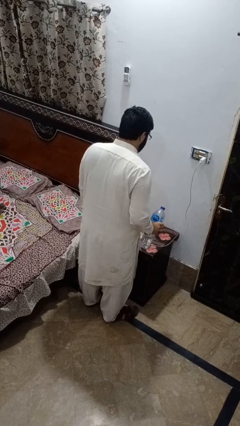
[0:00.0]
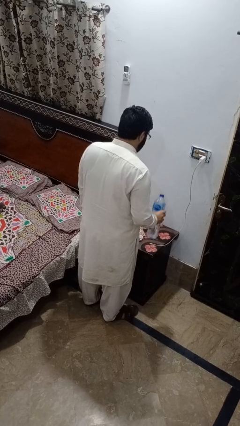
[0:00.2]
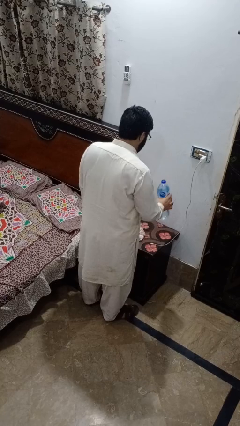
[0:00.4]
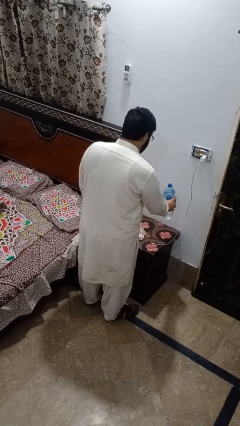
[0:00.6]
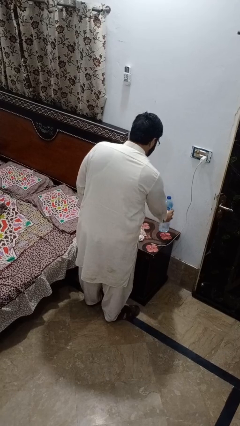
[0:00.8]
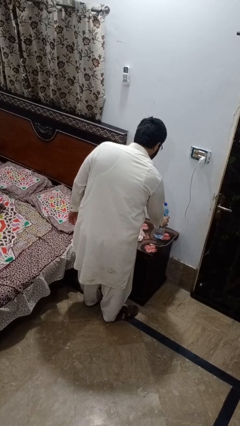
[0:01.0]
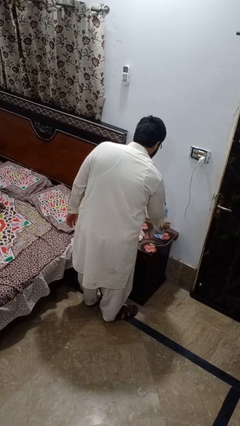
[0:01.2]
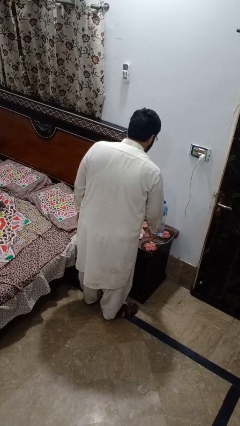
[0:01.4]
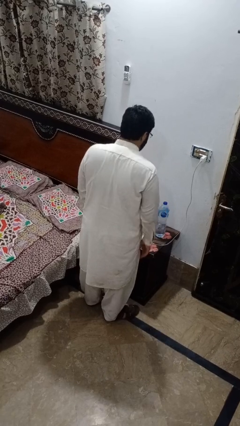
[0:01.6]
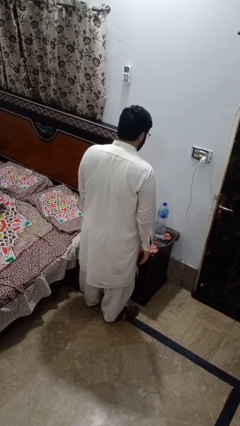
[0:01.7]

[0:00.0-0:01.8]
person puts down object on countertop

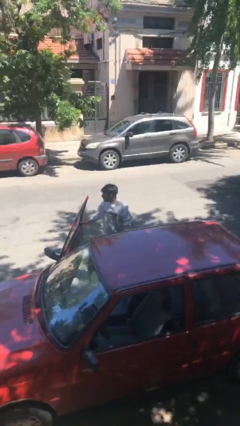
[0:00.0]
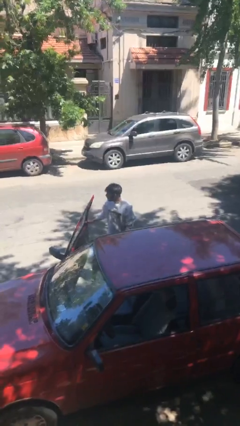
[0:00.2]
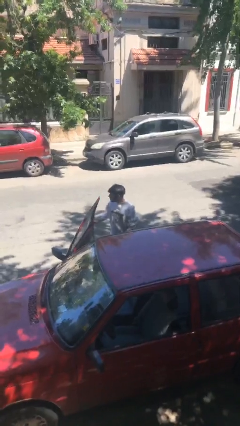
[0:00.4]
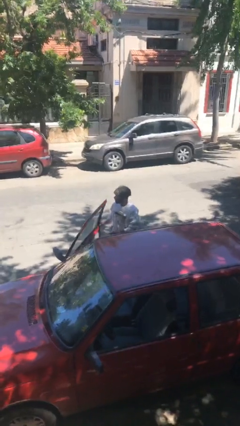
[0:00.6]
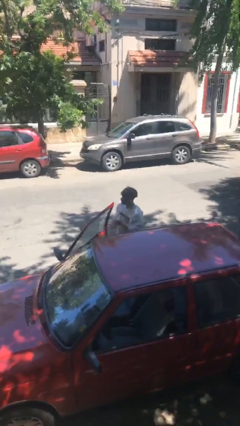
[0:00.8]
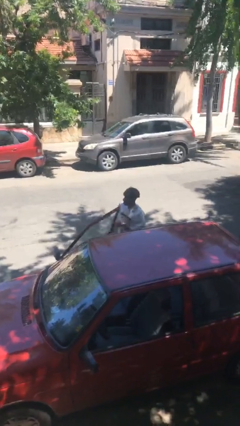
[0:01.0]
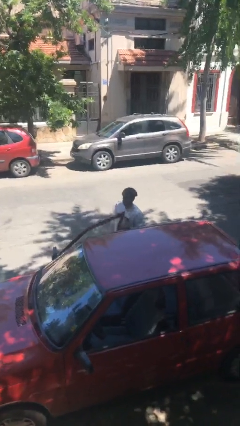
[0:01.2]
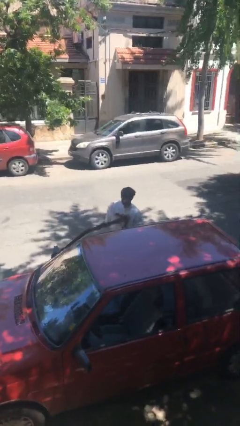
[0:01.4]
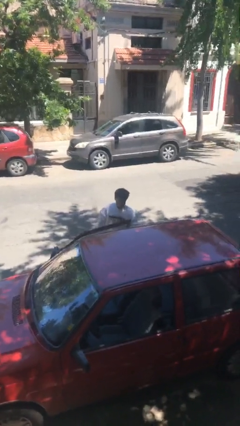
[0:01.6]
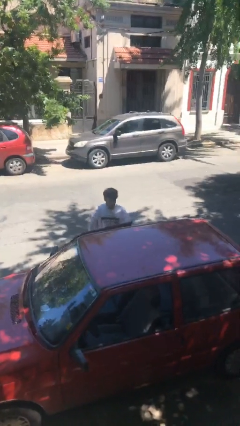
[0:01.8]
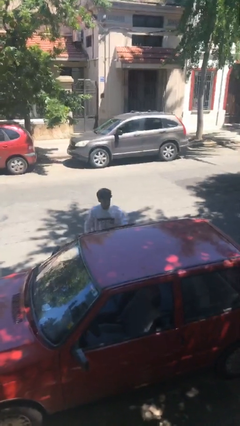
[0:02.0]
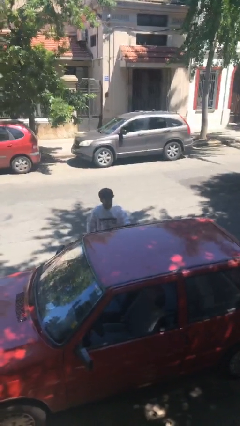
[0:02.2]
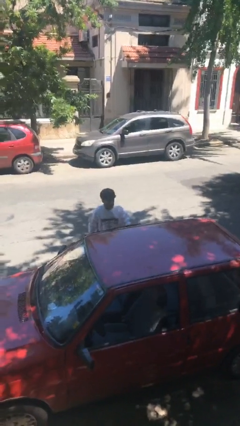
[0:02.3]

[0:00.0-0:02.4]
person closes car door

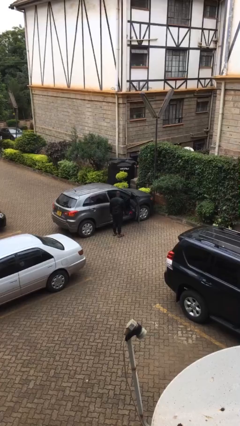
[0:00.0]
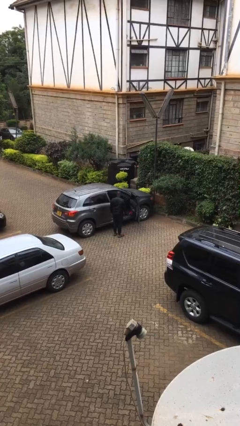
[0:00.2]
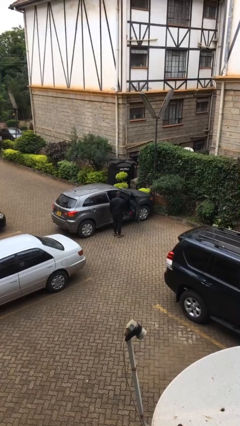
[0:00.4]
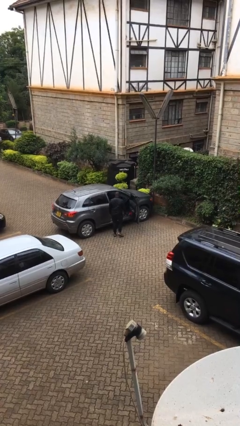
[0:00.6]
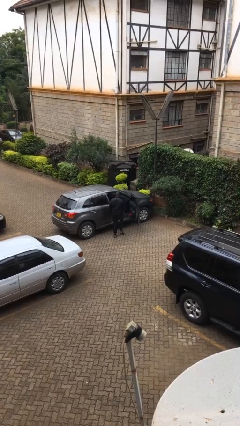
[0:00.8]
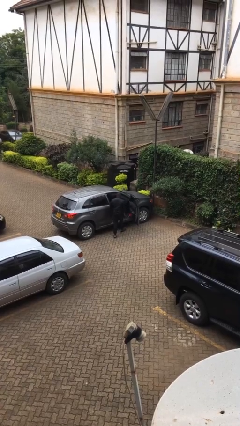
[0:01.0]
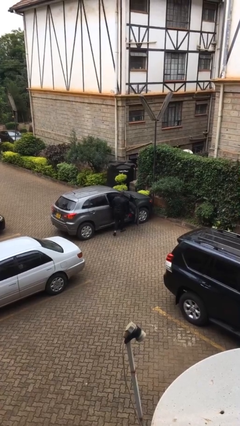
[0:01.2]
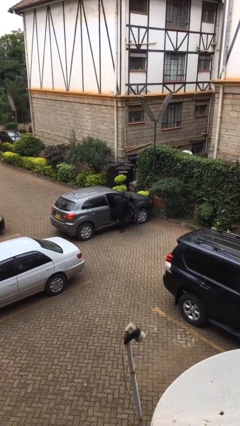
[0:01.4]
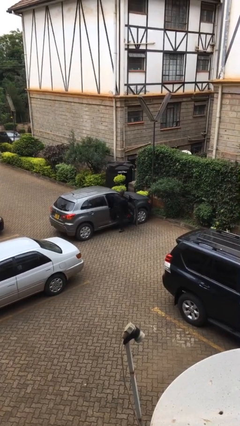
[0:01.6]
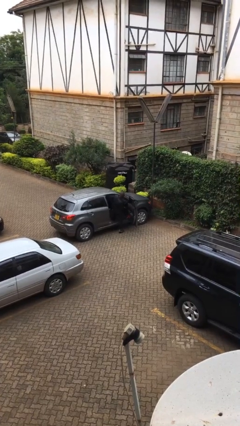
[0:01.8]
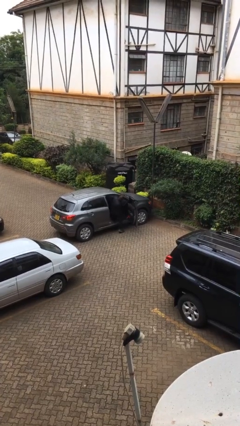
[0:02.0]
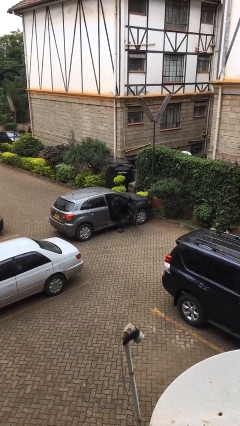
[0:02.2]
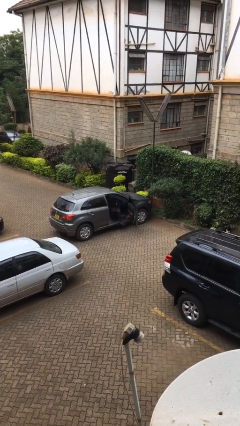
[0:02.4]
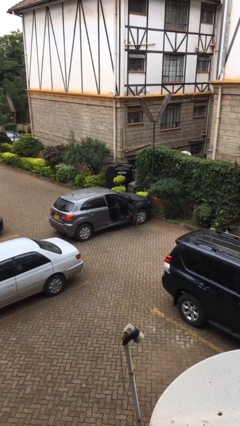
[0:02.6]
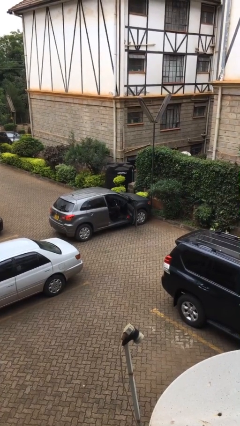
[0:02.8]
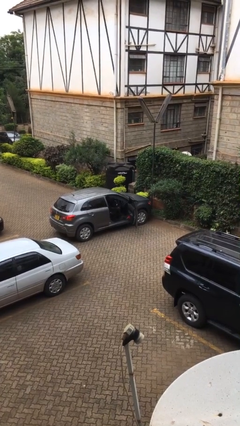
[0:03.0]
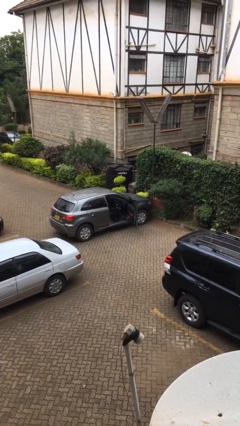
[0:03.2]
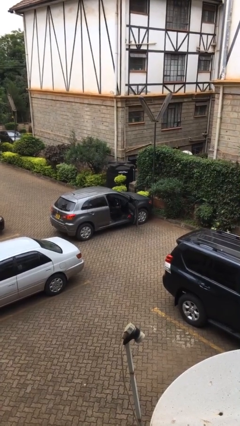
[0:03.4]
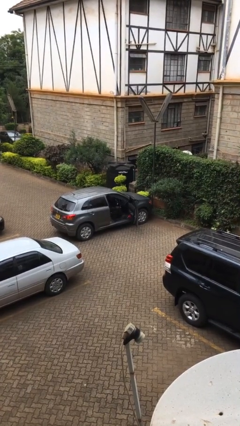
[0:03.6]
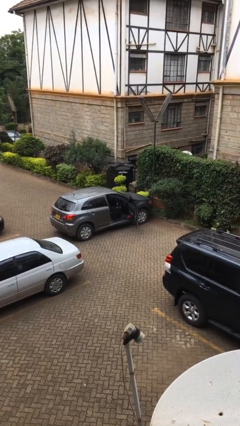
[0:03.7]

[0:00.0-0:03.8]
person enters car

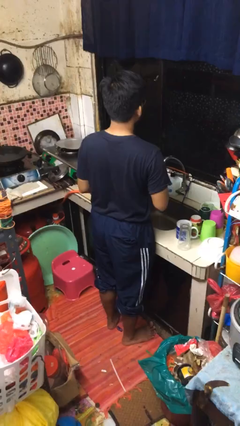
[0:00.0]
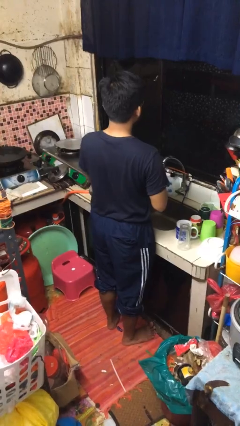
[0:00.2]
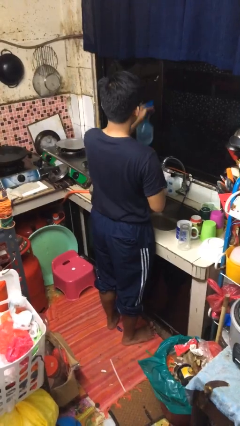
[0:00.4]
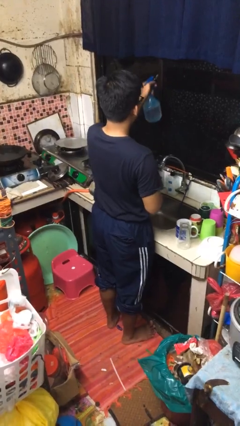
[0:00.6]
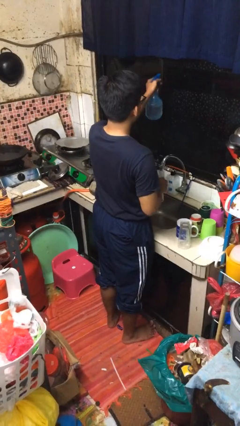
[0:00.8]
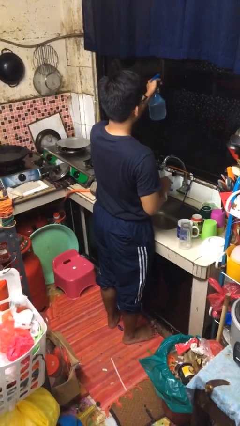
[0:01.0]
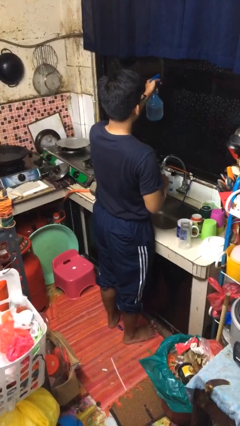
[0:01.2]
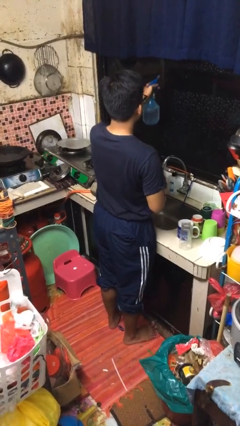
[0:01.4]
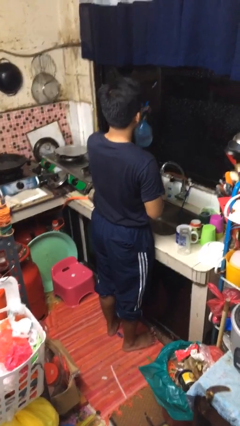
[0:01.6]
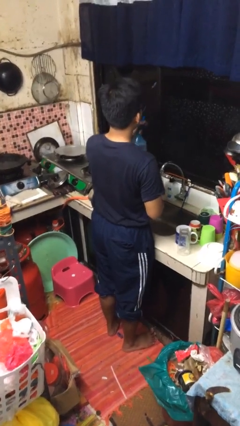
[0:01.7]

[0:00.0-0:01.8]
person sprays from bottle

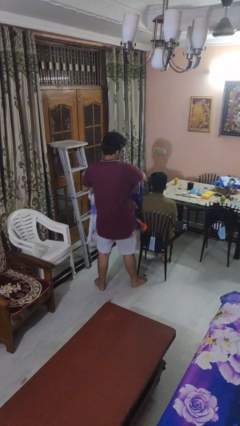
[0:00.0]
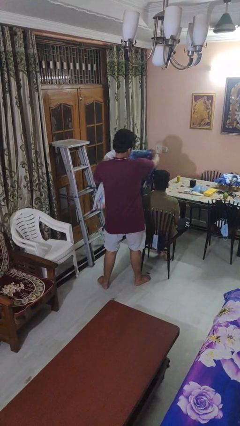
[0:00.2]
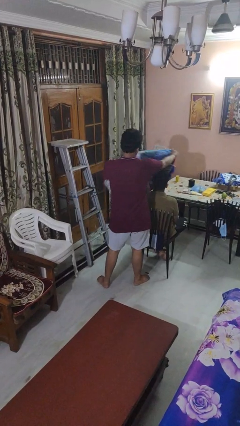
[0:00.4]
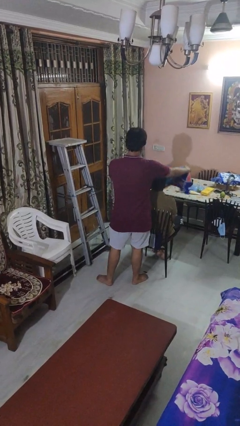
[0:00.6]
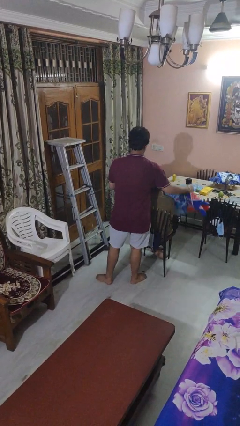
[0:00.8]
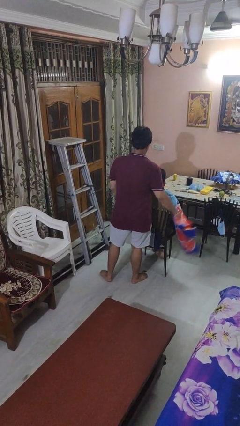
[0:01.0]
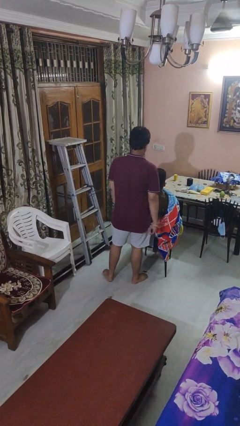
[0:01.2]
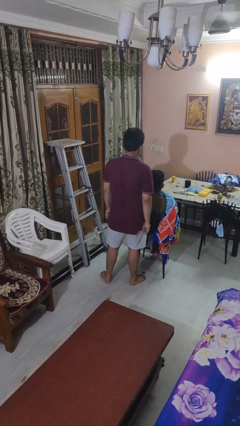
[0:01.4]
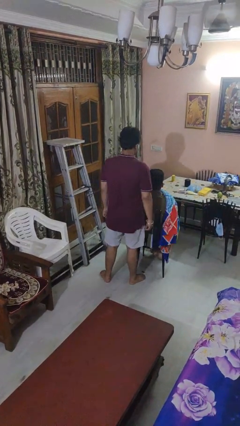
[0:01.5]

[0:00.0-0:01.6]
person covers friend with blanket

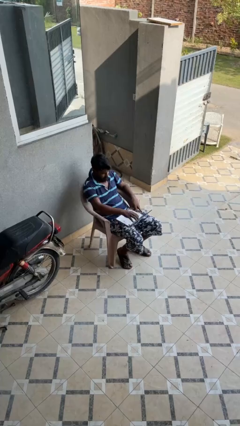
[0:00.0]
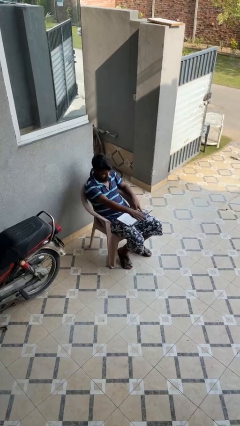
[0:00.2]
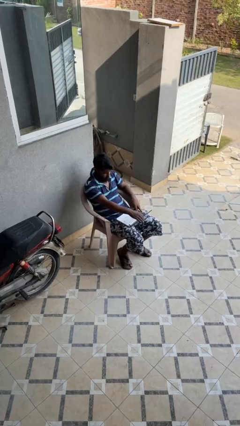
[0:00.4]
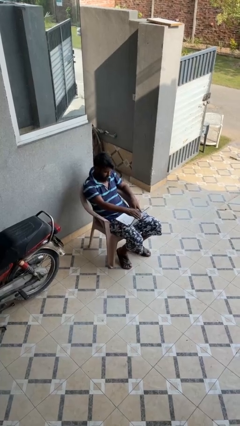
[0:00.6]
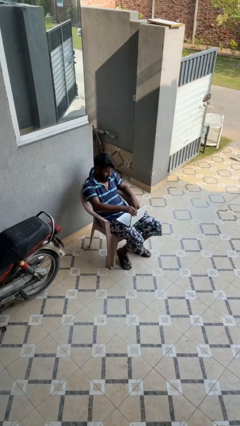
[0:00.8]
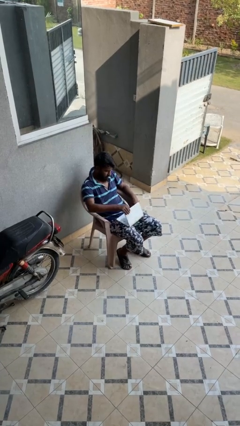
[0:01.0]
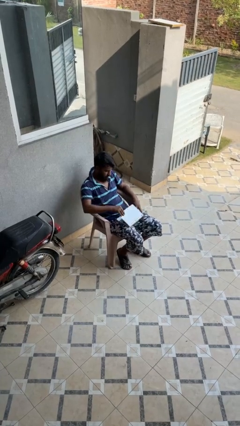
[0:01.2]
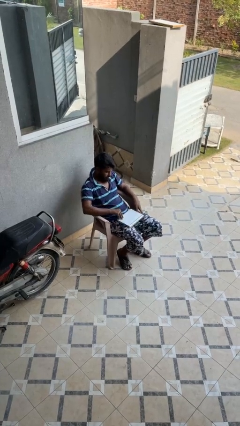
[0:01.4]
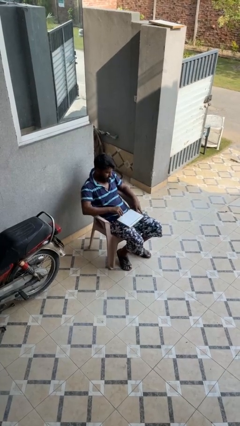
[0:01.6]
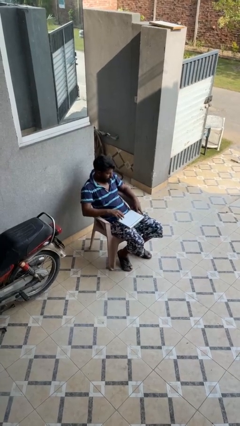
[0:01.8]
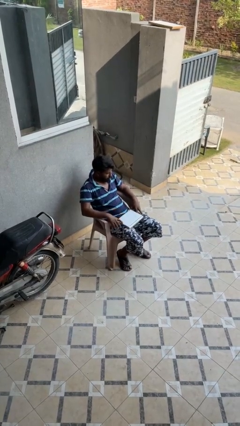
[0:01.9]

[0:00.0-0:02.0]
person closes laptop

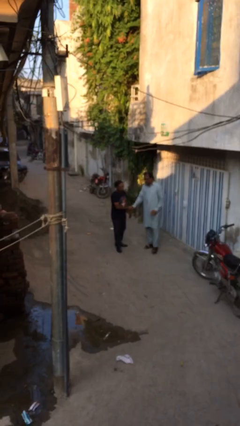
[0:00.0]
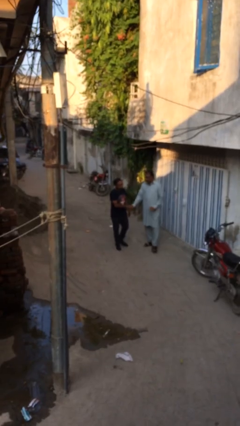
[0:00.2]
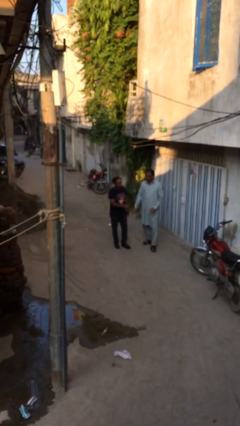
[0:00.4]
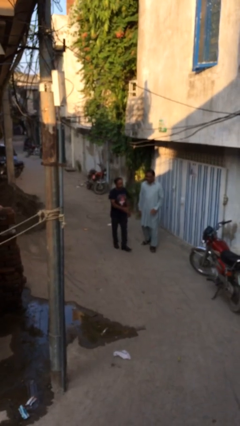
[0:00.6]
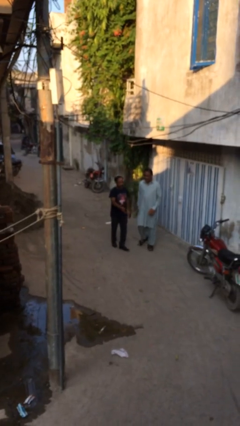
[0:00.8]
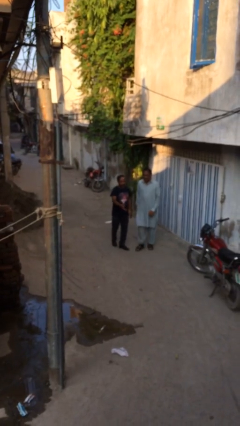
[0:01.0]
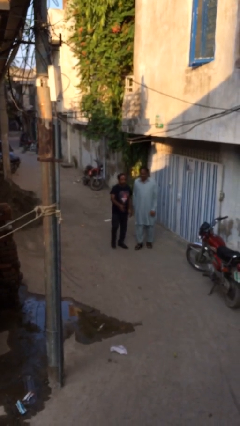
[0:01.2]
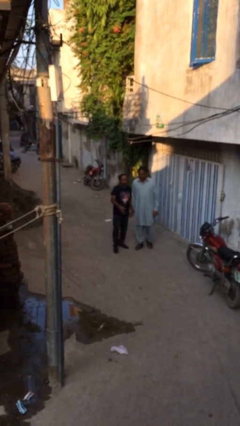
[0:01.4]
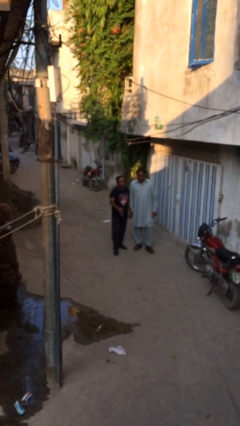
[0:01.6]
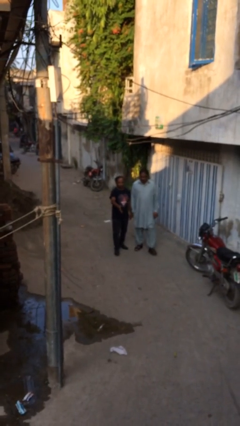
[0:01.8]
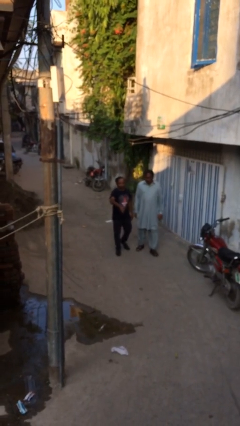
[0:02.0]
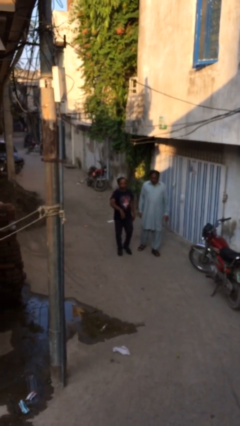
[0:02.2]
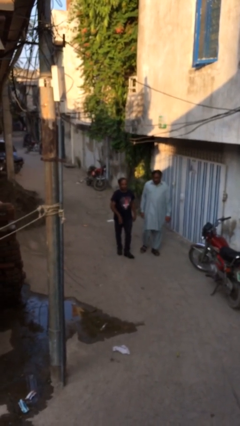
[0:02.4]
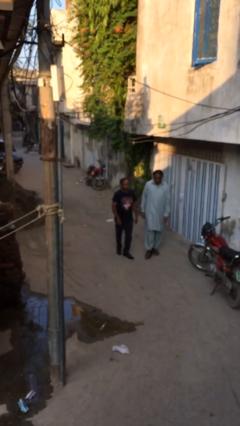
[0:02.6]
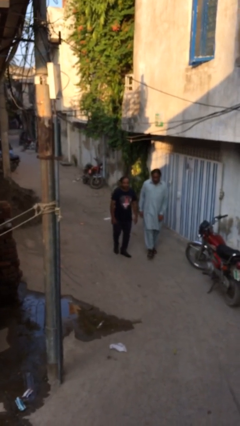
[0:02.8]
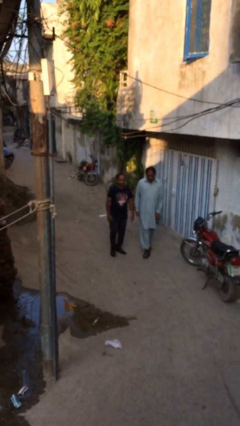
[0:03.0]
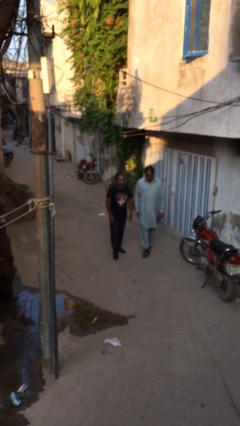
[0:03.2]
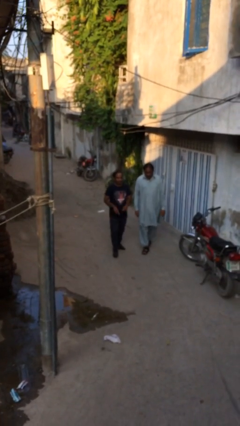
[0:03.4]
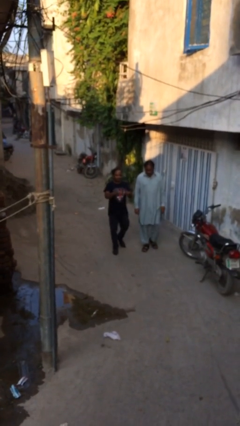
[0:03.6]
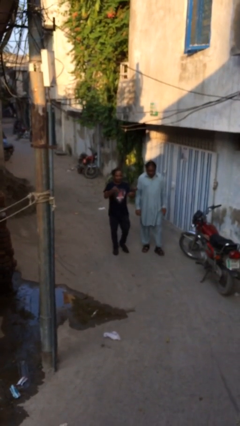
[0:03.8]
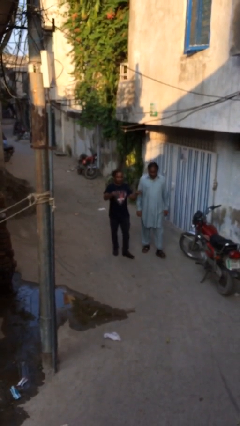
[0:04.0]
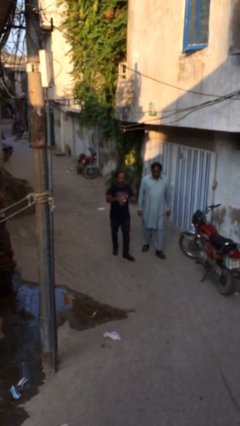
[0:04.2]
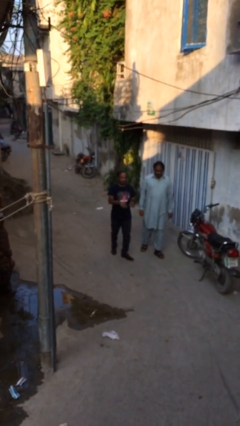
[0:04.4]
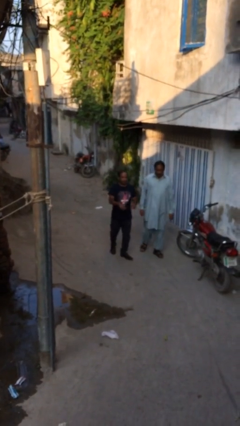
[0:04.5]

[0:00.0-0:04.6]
person talks to person
